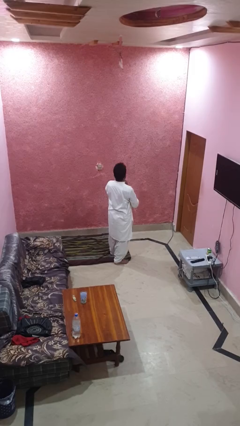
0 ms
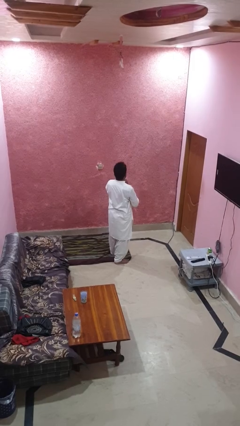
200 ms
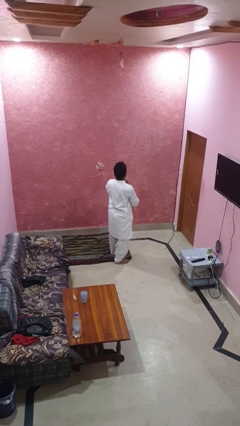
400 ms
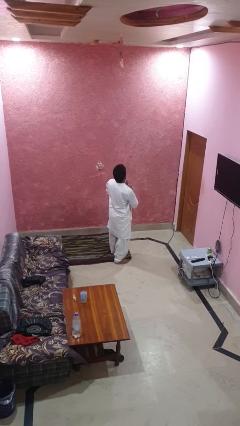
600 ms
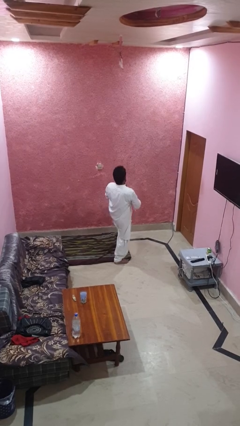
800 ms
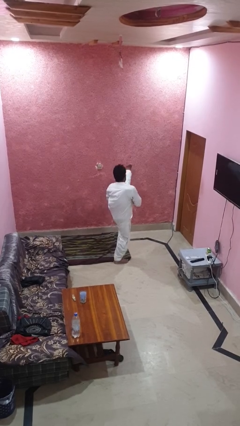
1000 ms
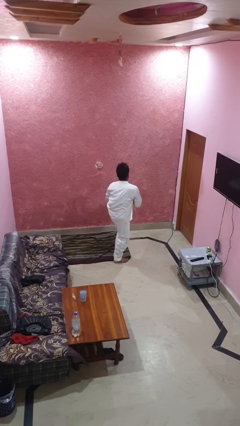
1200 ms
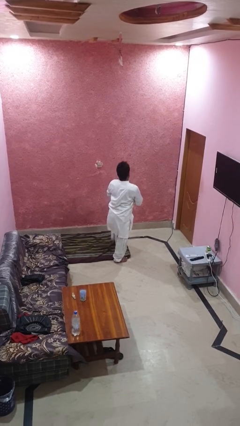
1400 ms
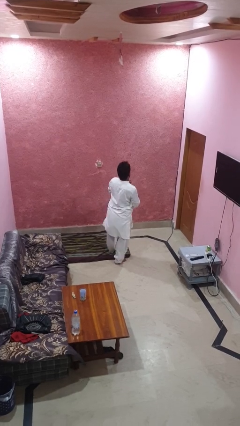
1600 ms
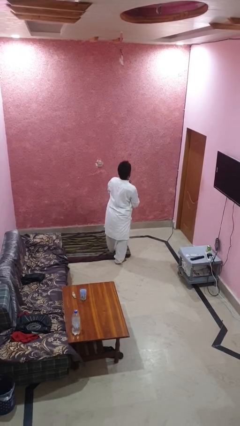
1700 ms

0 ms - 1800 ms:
person karate kicks

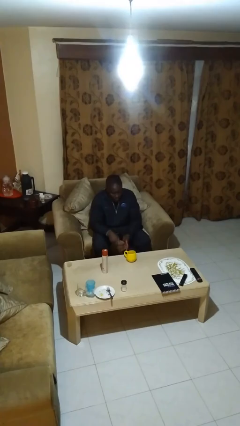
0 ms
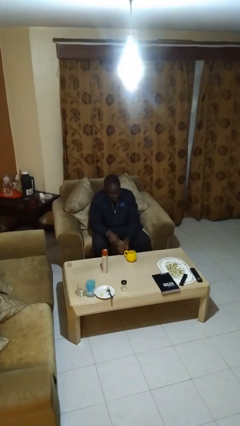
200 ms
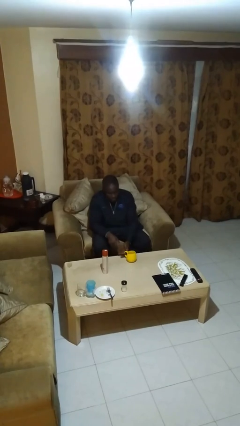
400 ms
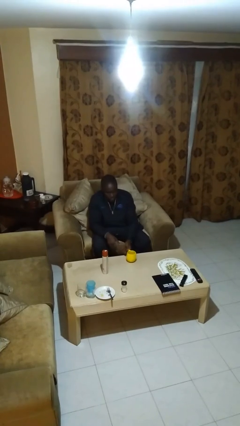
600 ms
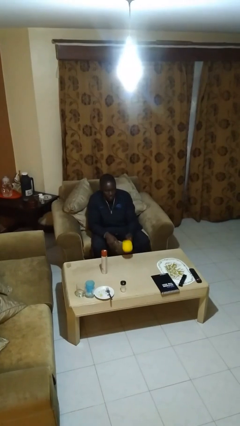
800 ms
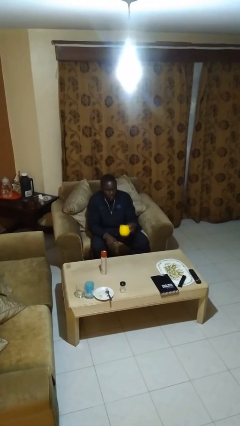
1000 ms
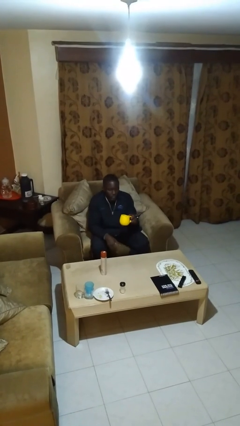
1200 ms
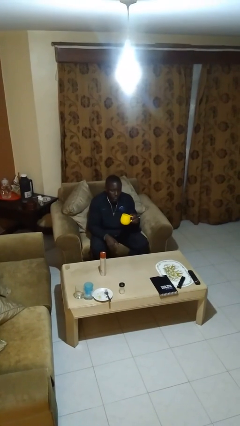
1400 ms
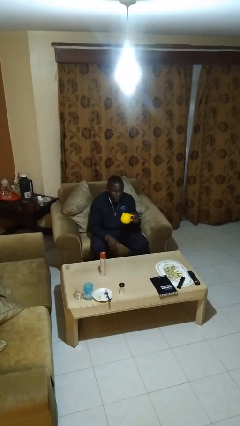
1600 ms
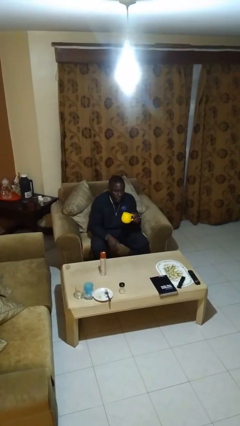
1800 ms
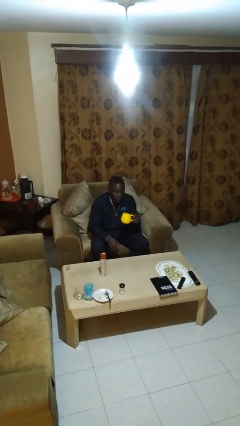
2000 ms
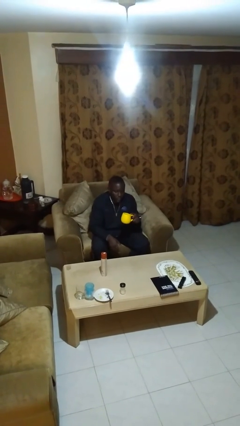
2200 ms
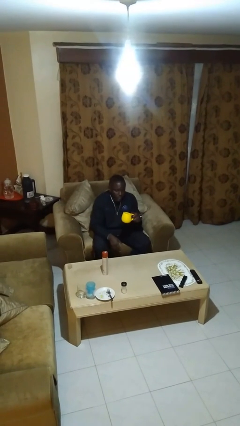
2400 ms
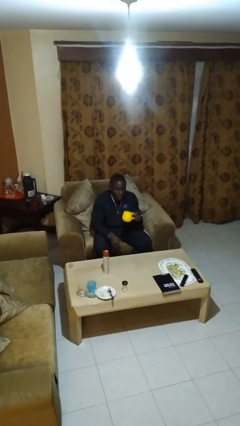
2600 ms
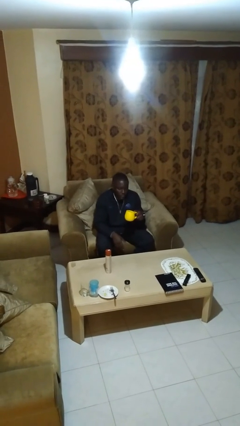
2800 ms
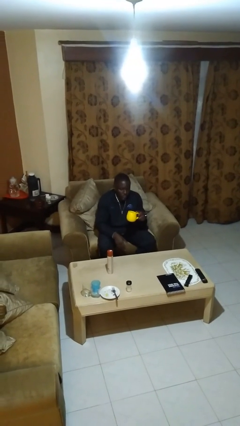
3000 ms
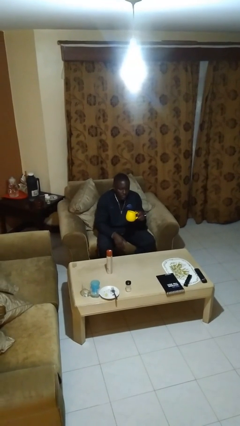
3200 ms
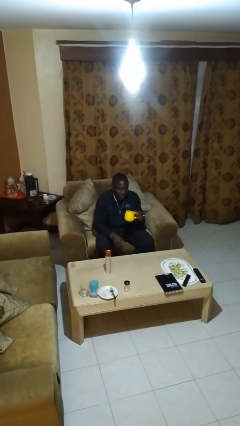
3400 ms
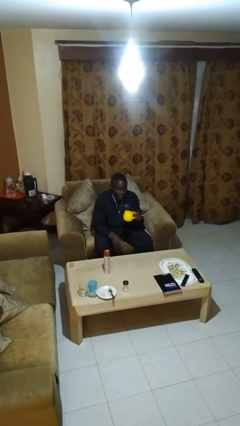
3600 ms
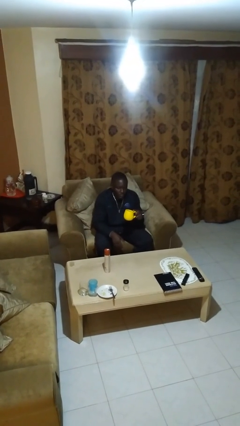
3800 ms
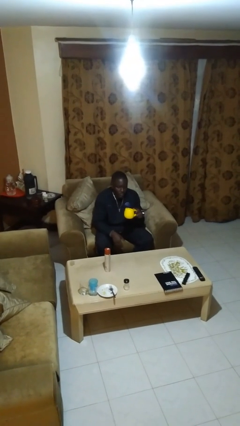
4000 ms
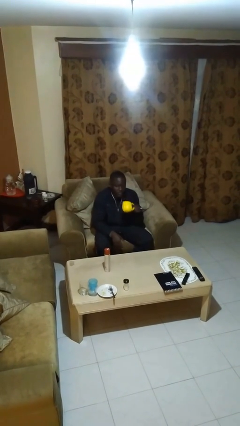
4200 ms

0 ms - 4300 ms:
person picks up object from table

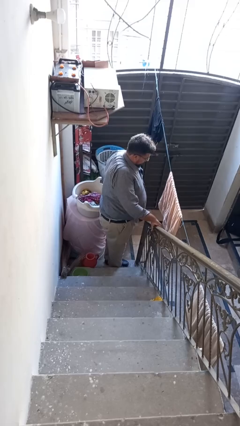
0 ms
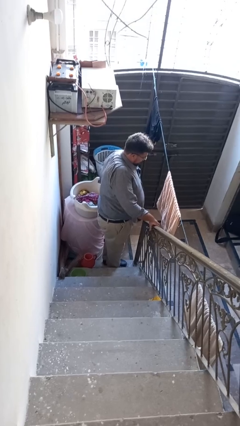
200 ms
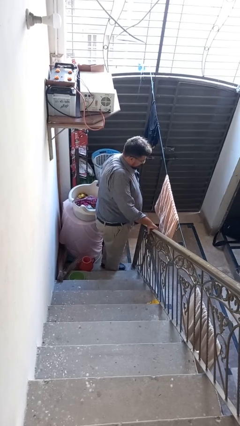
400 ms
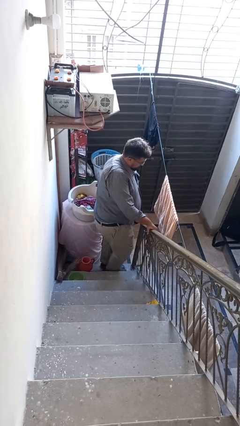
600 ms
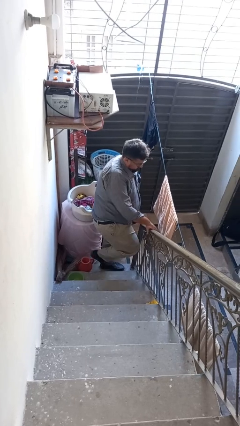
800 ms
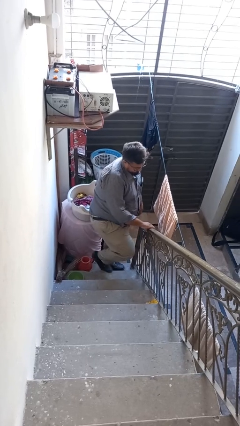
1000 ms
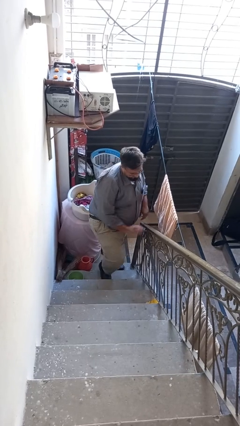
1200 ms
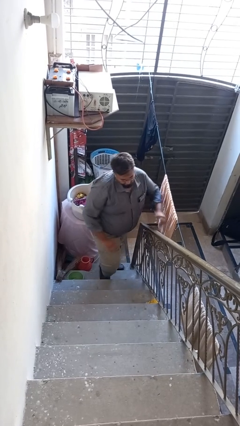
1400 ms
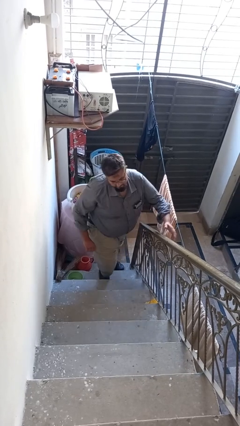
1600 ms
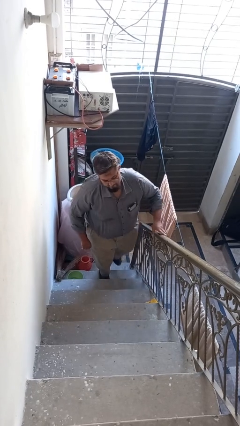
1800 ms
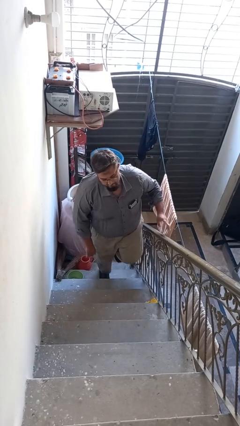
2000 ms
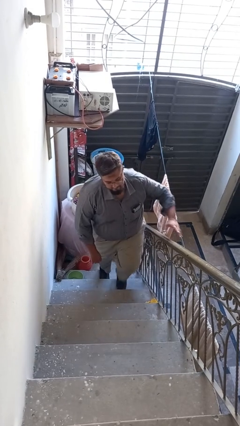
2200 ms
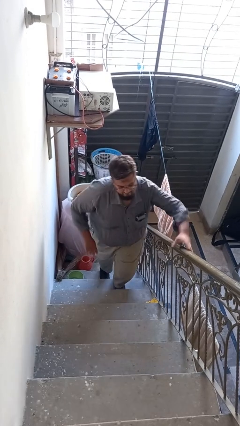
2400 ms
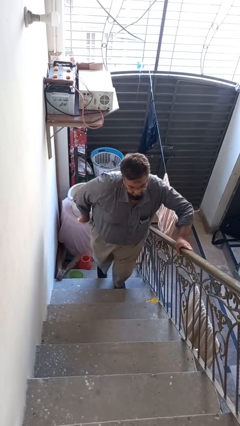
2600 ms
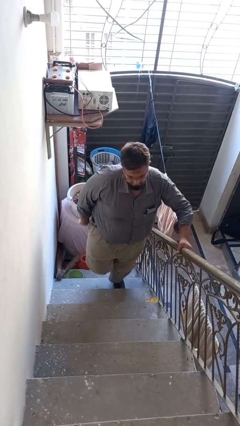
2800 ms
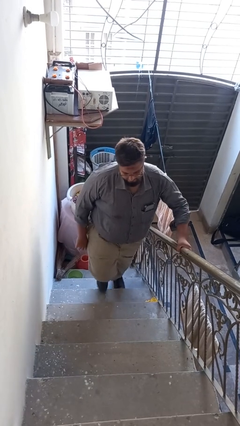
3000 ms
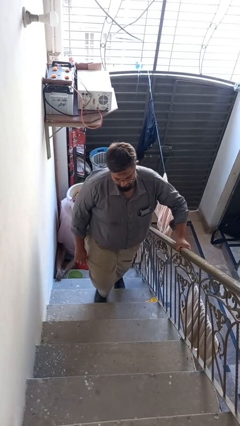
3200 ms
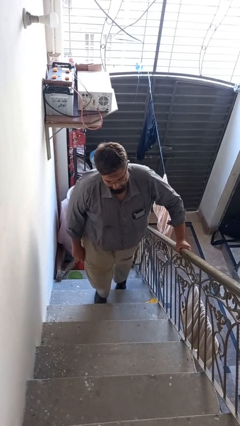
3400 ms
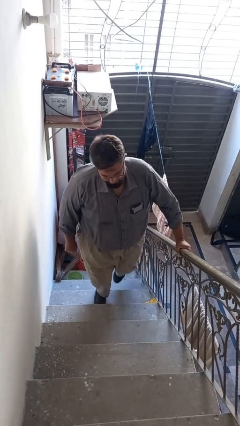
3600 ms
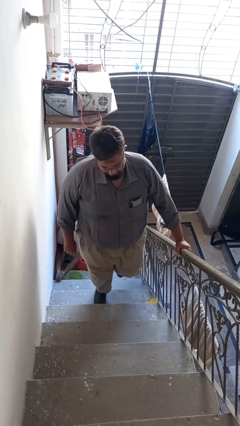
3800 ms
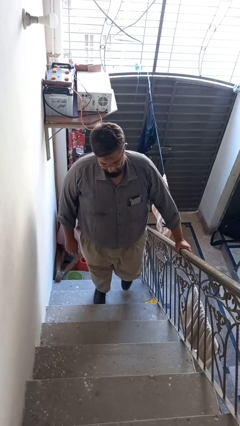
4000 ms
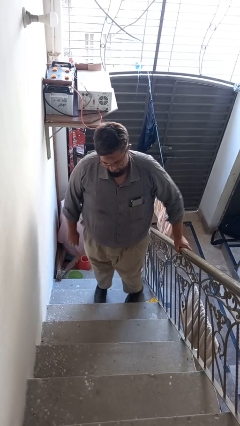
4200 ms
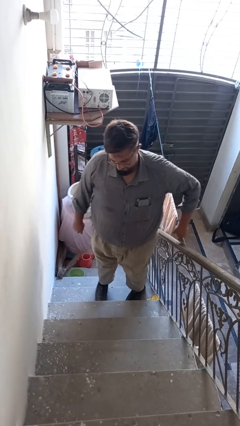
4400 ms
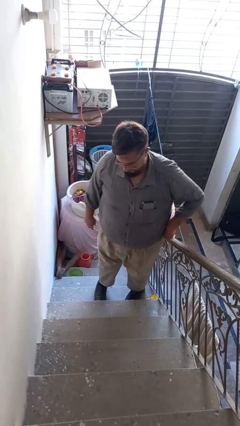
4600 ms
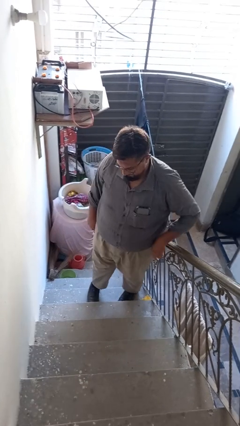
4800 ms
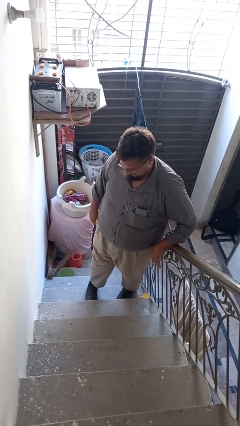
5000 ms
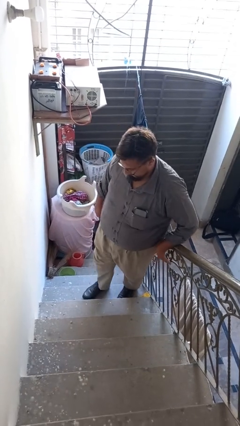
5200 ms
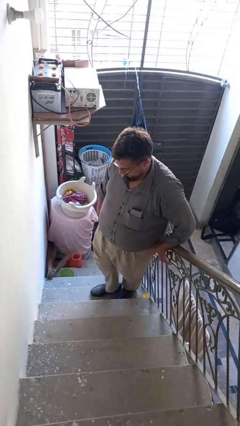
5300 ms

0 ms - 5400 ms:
person climbs up stairs

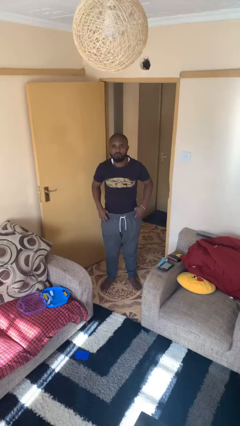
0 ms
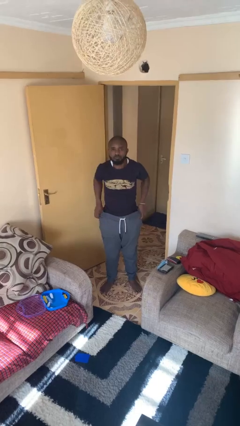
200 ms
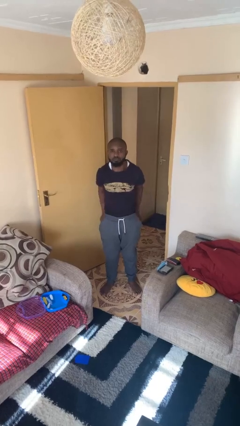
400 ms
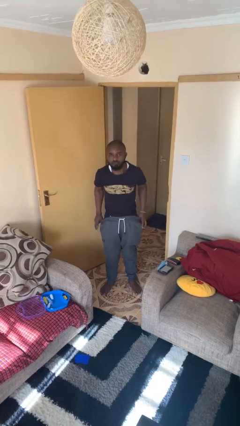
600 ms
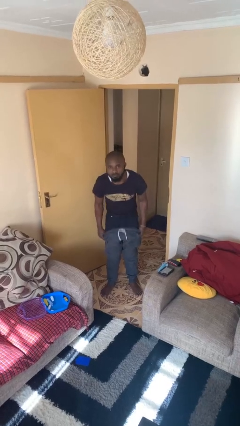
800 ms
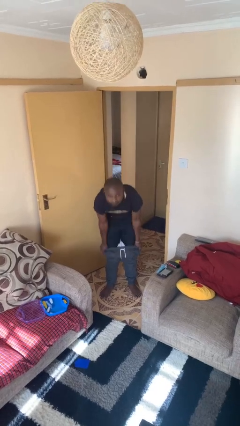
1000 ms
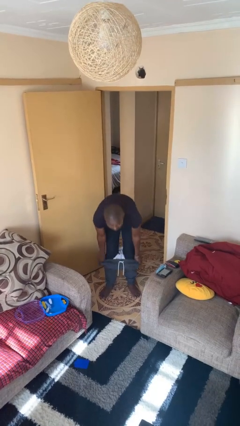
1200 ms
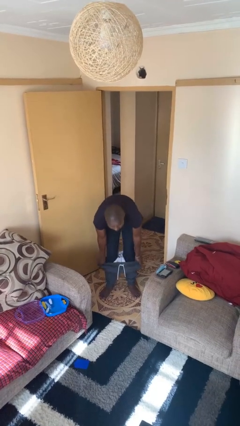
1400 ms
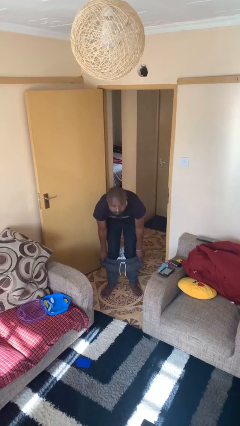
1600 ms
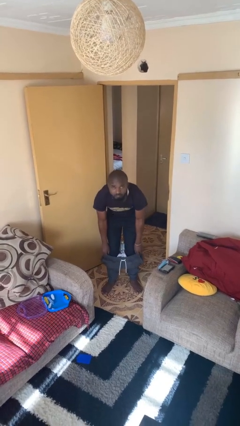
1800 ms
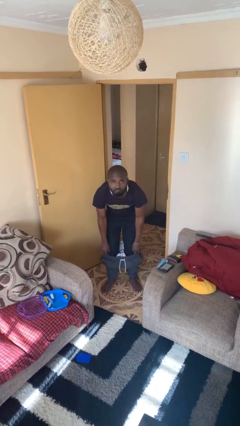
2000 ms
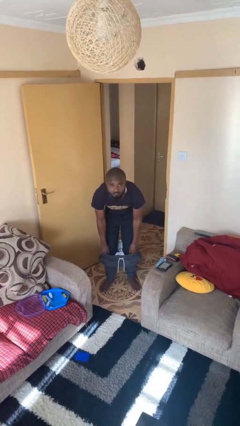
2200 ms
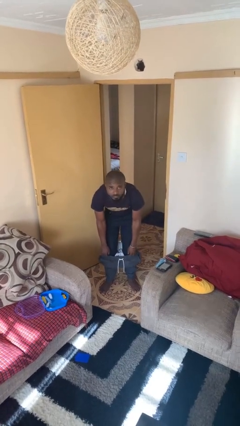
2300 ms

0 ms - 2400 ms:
person takes off pants

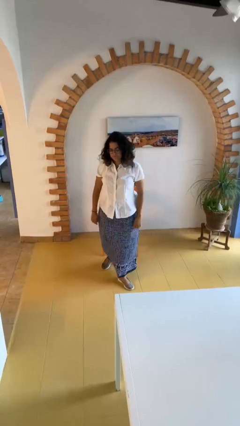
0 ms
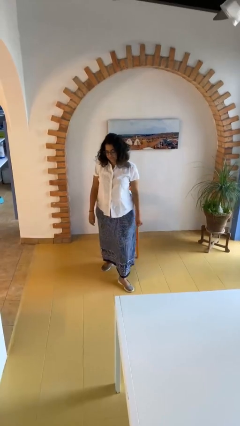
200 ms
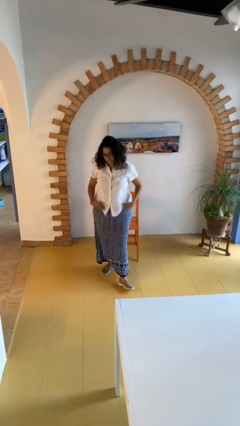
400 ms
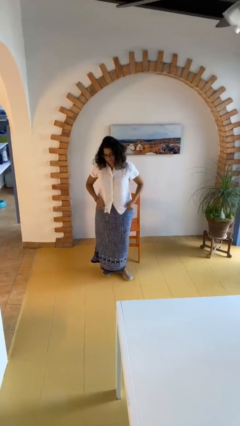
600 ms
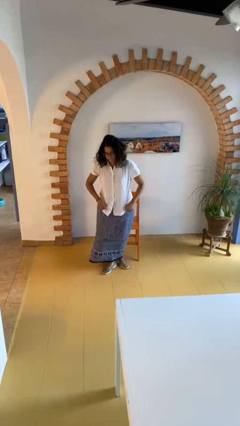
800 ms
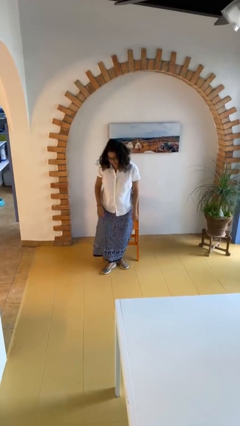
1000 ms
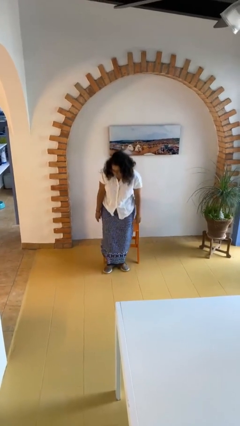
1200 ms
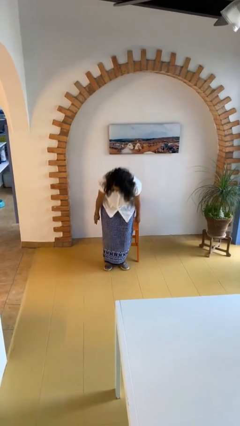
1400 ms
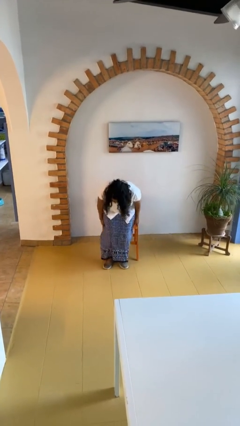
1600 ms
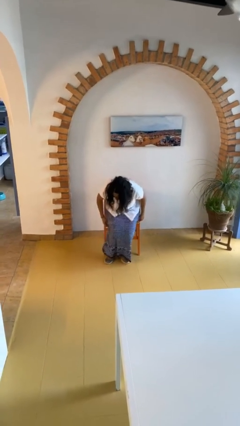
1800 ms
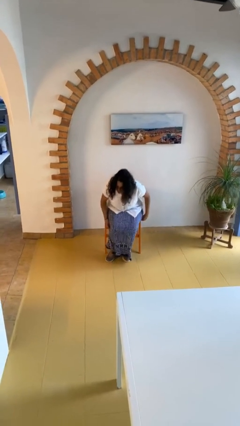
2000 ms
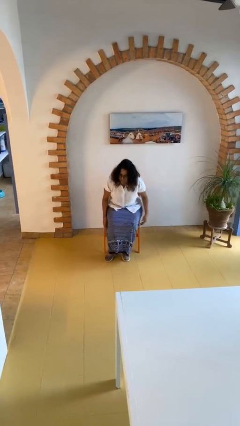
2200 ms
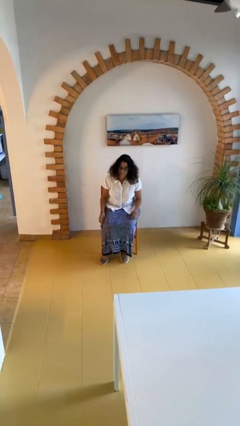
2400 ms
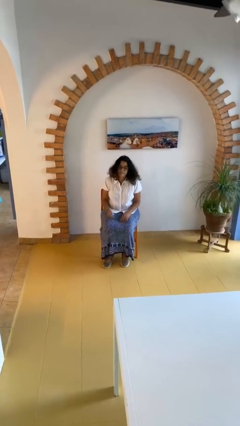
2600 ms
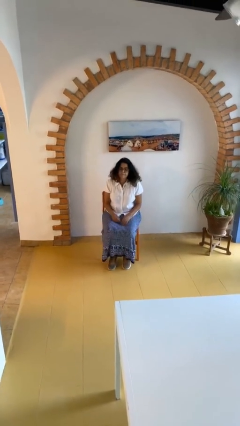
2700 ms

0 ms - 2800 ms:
person sits down

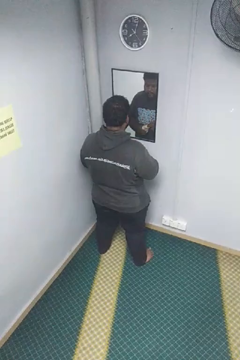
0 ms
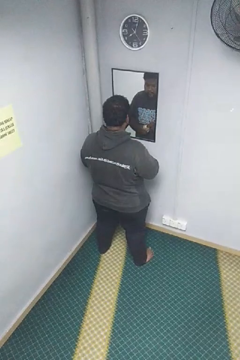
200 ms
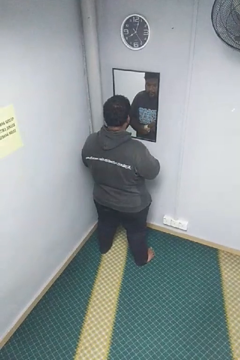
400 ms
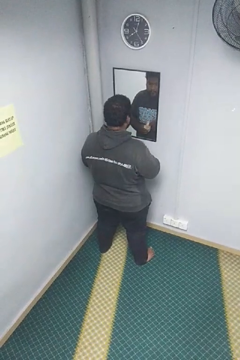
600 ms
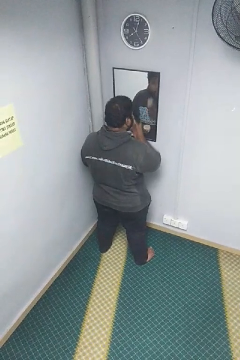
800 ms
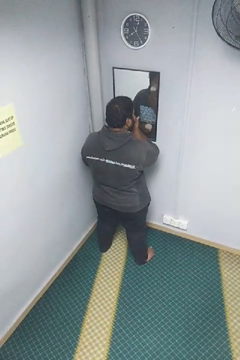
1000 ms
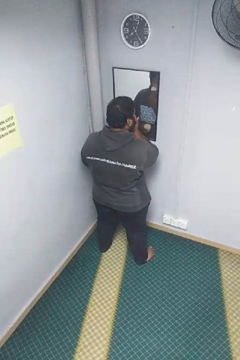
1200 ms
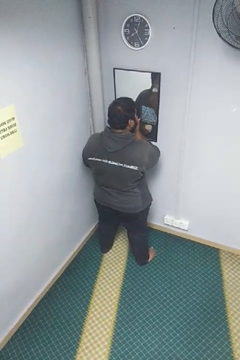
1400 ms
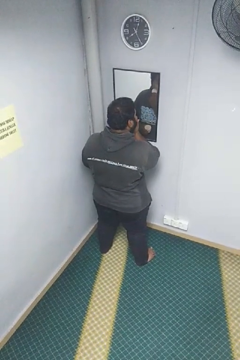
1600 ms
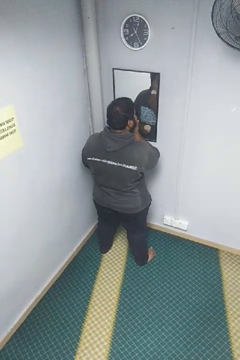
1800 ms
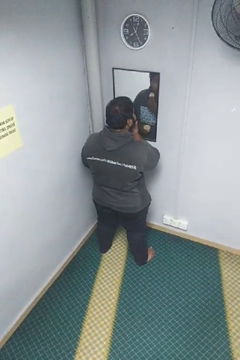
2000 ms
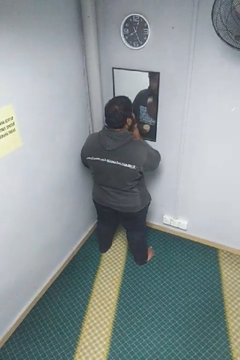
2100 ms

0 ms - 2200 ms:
person applies foundation makeup
